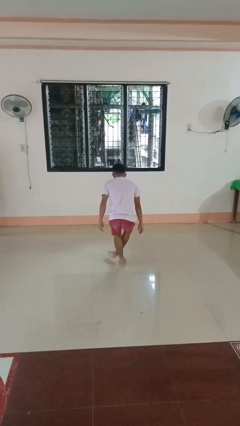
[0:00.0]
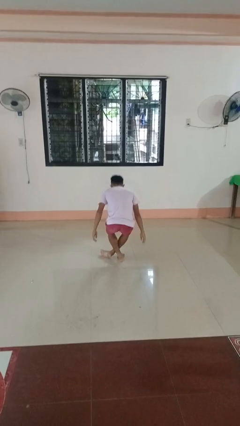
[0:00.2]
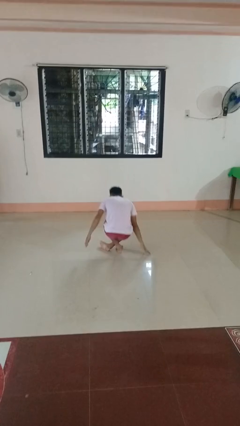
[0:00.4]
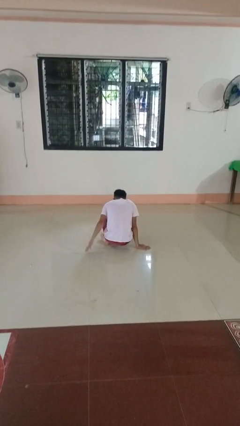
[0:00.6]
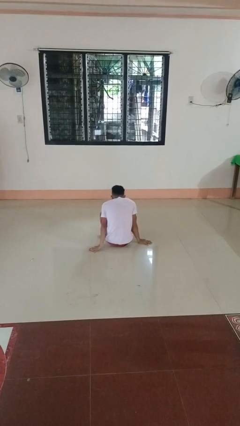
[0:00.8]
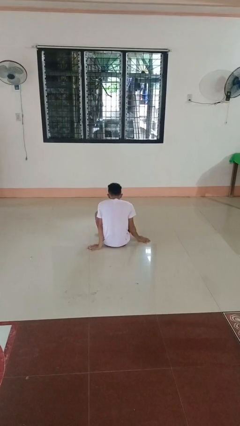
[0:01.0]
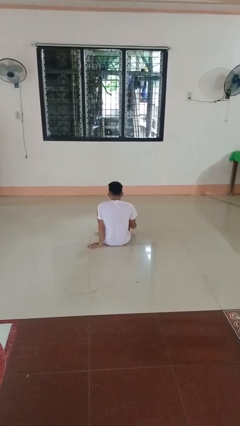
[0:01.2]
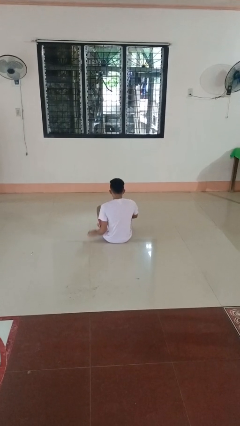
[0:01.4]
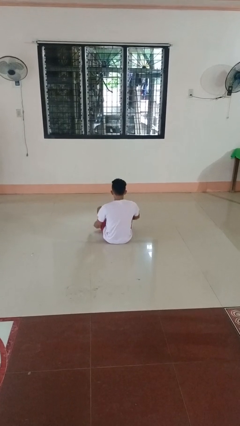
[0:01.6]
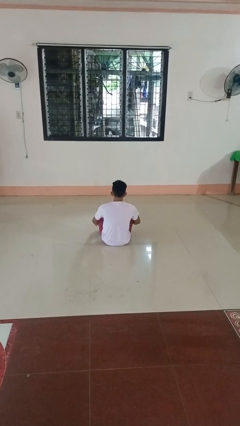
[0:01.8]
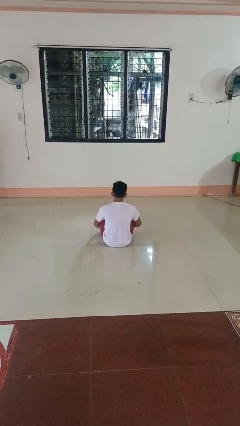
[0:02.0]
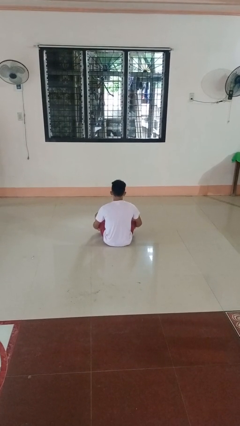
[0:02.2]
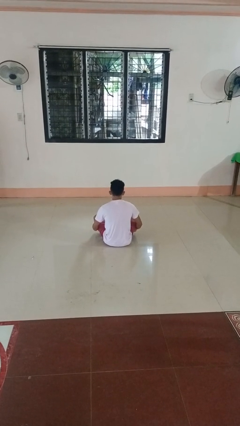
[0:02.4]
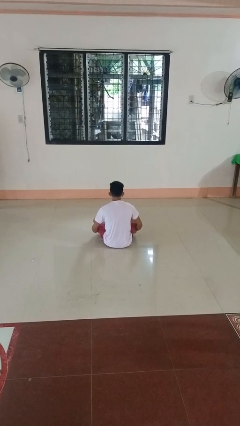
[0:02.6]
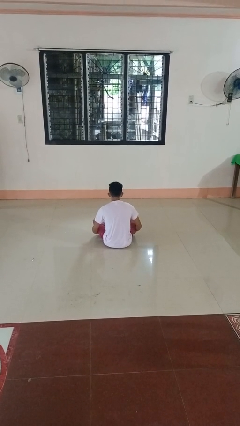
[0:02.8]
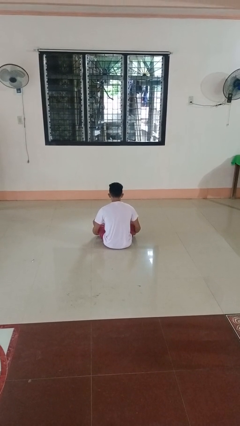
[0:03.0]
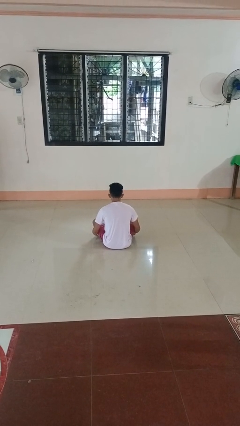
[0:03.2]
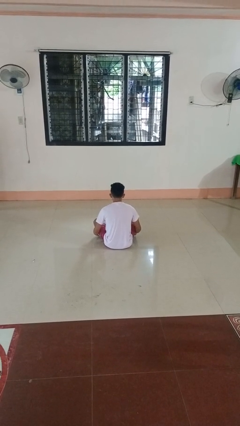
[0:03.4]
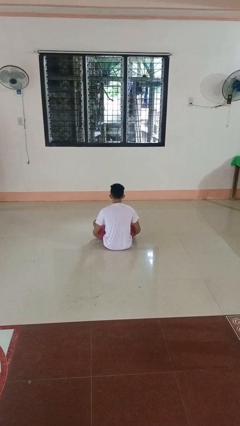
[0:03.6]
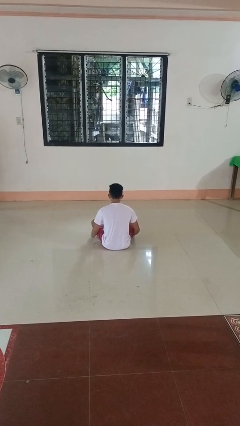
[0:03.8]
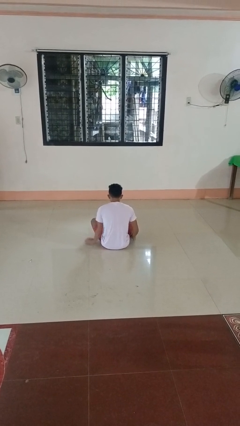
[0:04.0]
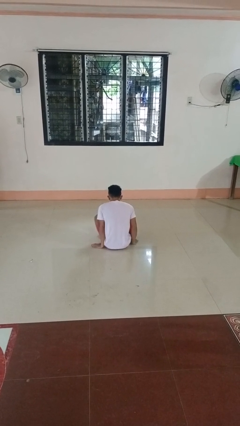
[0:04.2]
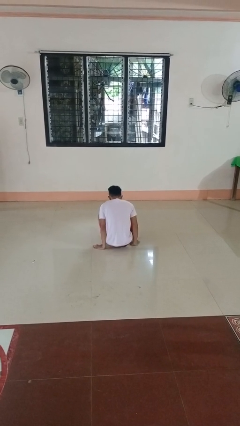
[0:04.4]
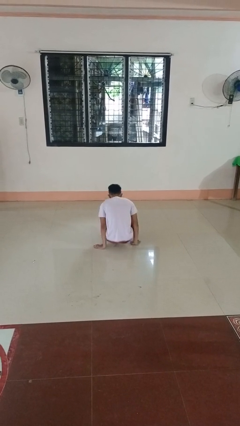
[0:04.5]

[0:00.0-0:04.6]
person sits crisscross

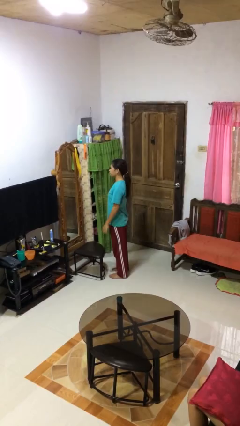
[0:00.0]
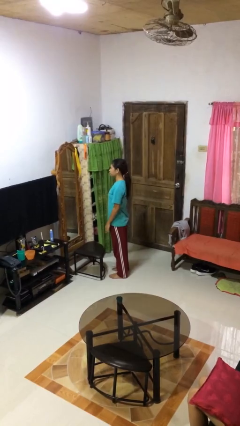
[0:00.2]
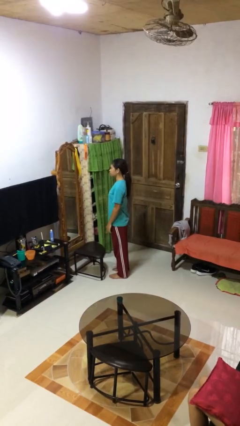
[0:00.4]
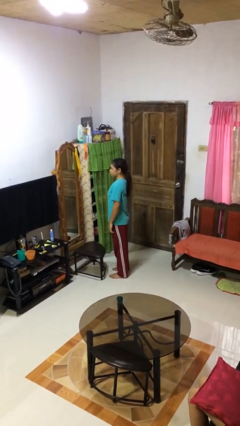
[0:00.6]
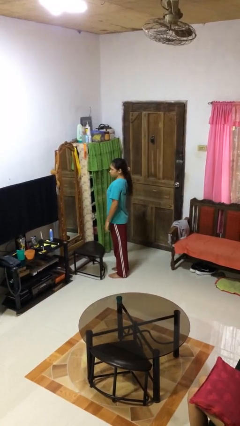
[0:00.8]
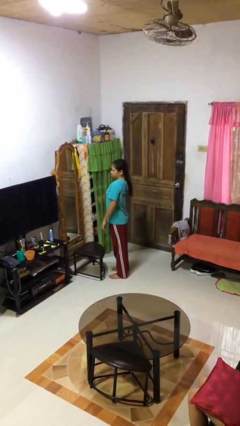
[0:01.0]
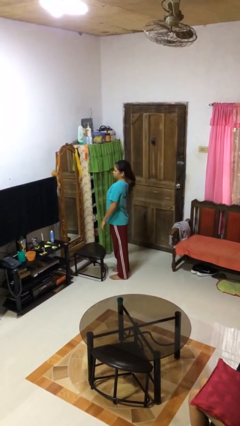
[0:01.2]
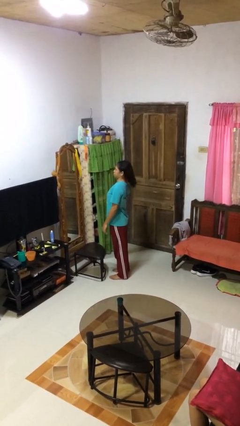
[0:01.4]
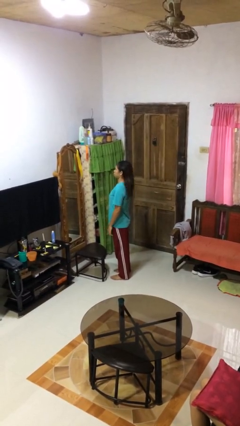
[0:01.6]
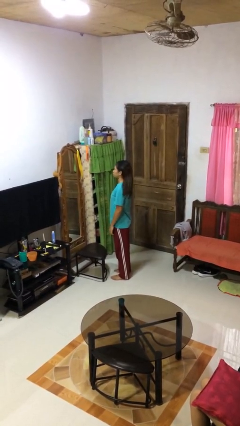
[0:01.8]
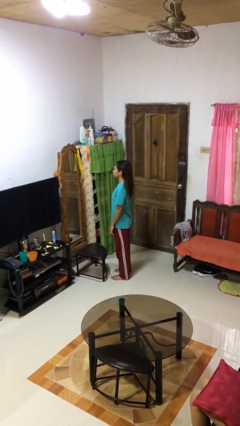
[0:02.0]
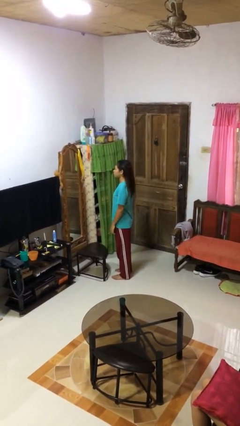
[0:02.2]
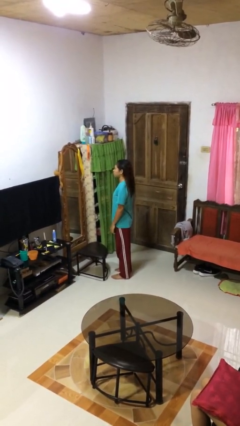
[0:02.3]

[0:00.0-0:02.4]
person takes off hairtie

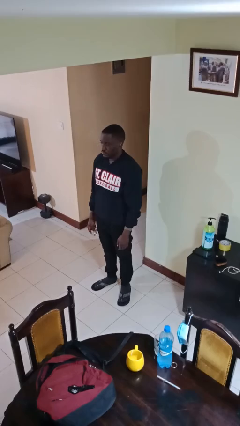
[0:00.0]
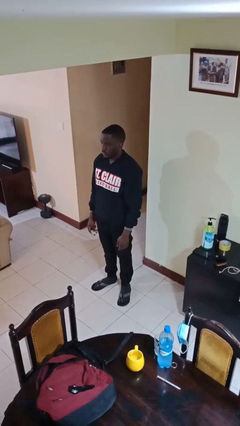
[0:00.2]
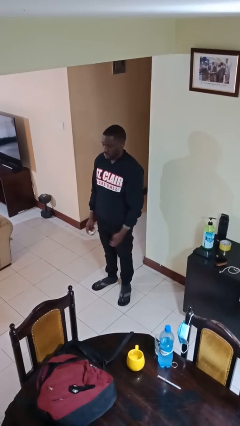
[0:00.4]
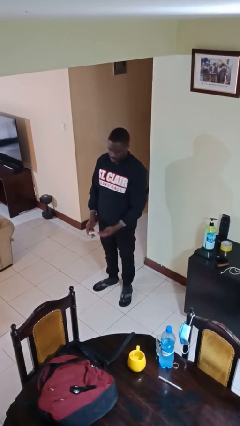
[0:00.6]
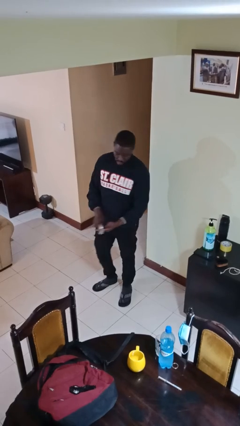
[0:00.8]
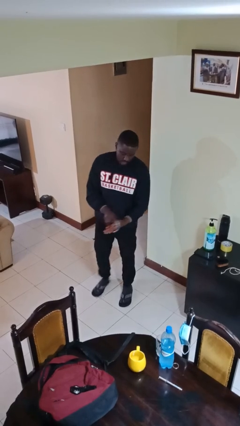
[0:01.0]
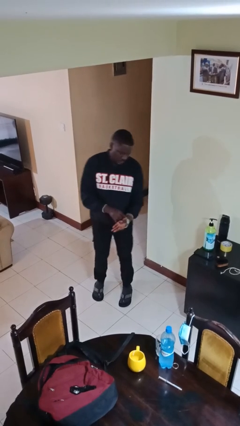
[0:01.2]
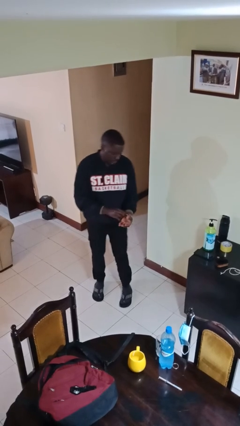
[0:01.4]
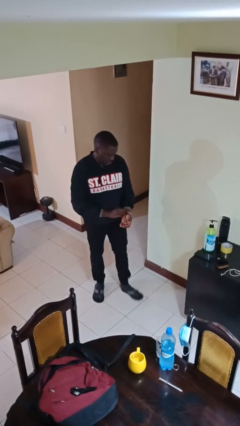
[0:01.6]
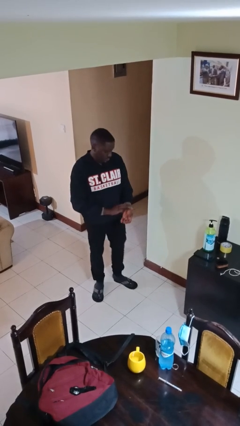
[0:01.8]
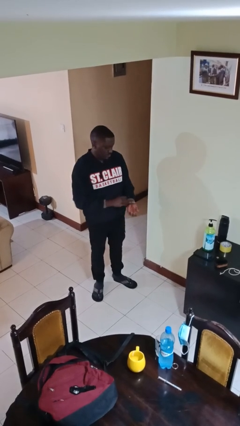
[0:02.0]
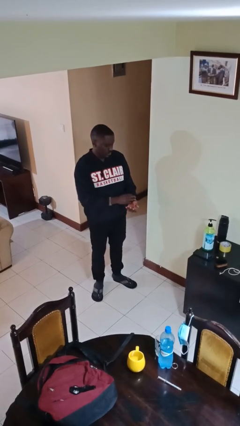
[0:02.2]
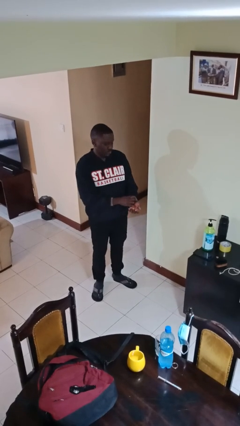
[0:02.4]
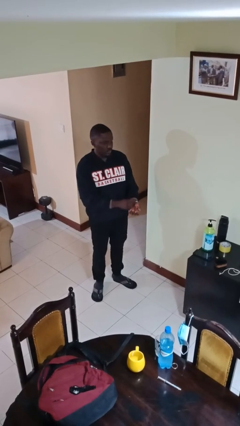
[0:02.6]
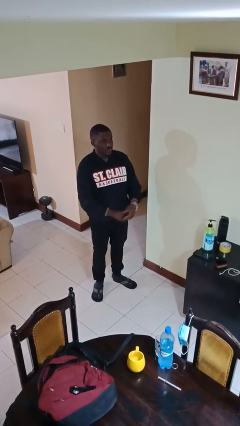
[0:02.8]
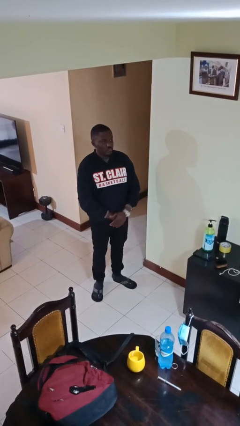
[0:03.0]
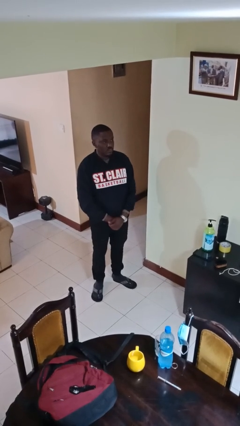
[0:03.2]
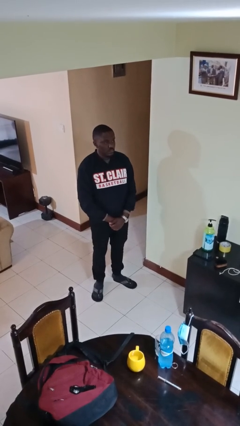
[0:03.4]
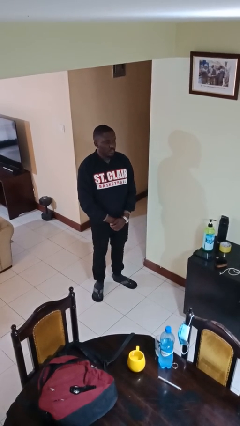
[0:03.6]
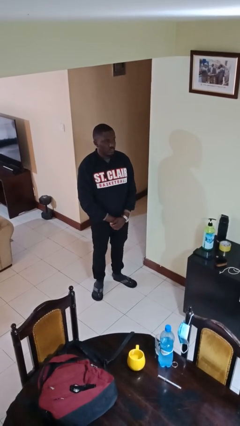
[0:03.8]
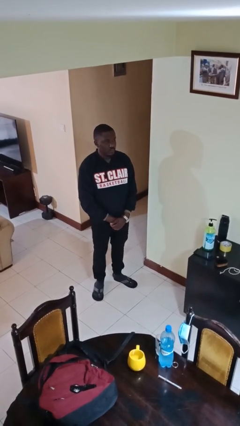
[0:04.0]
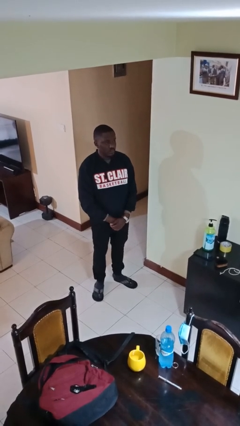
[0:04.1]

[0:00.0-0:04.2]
person puts on wristwatch

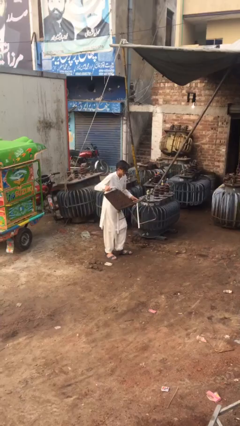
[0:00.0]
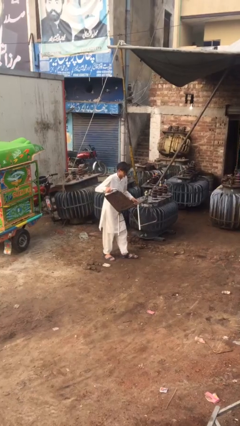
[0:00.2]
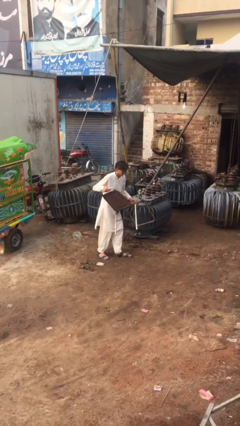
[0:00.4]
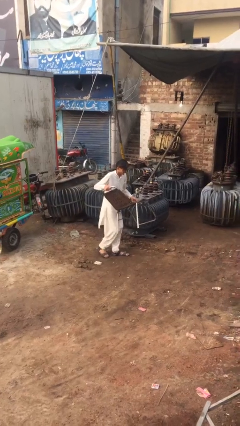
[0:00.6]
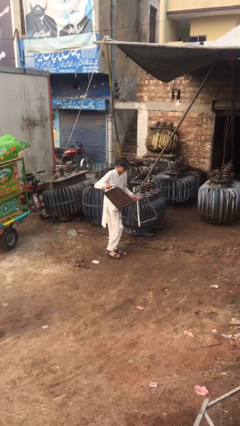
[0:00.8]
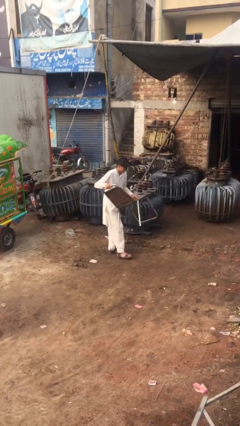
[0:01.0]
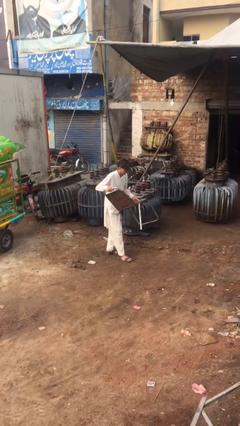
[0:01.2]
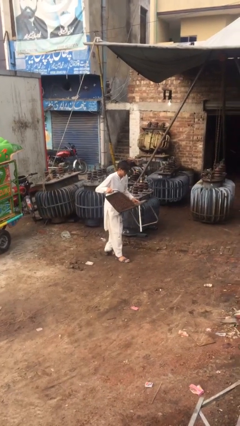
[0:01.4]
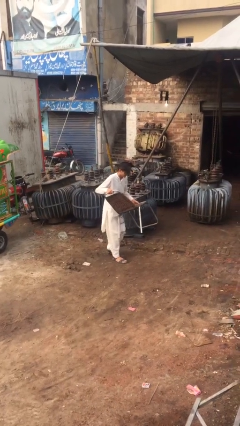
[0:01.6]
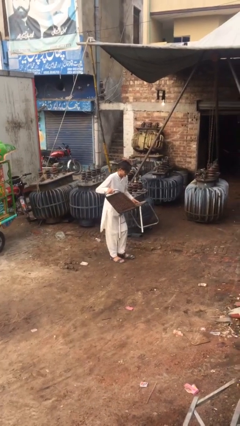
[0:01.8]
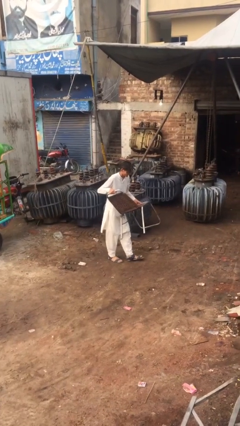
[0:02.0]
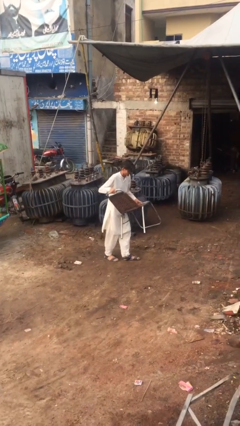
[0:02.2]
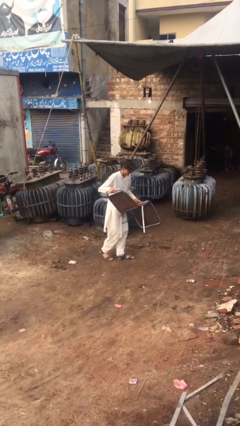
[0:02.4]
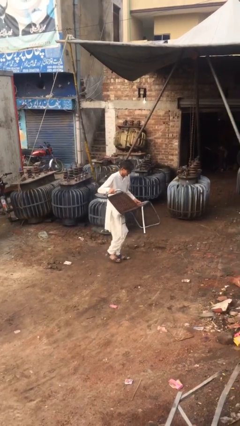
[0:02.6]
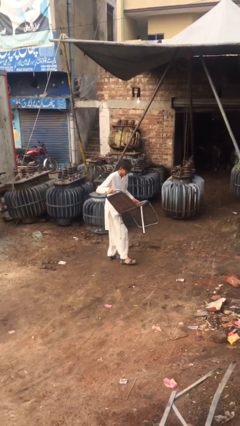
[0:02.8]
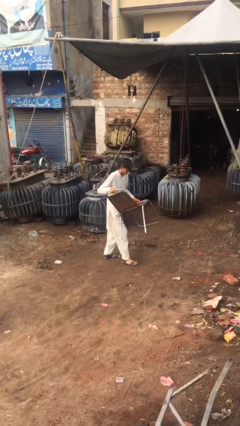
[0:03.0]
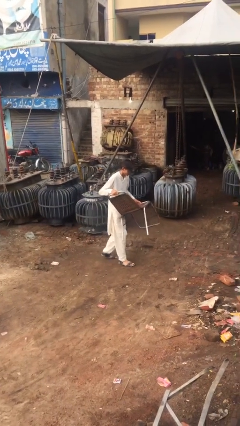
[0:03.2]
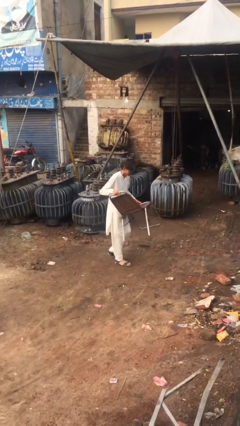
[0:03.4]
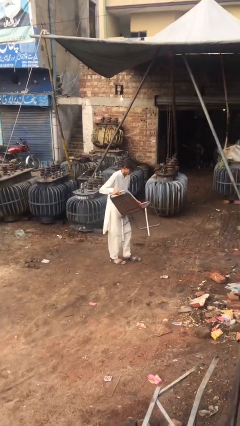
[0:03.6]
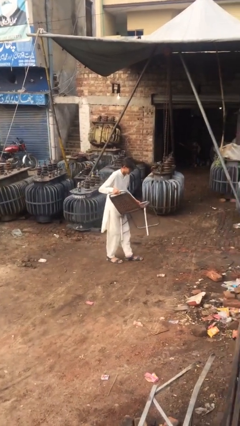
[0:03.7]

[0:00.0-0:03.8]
person carries heavy object

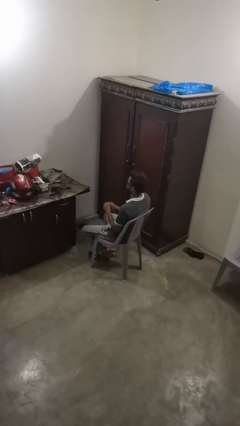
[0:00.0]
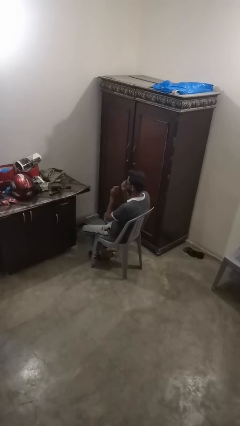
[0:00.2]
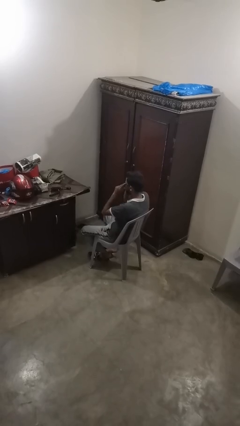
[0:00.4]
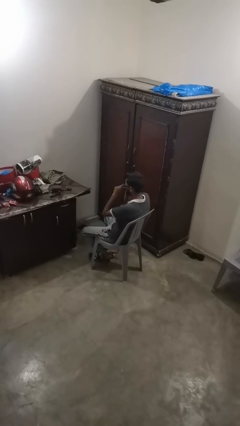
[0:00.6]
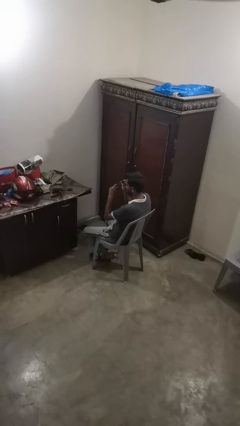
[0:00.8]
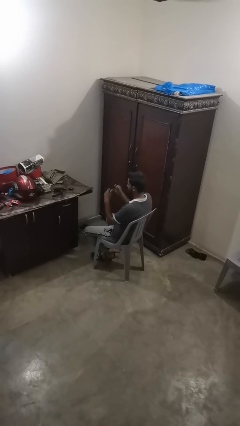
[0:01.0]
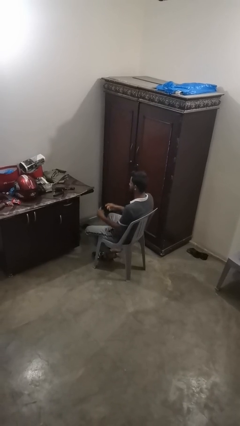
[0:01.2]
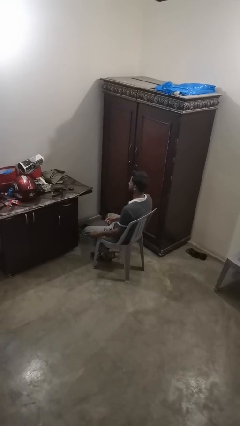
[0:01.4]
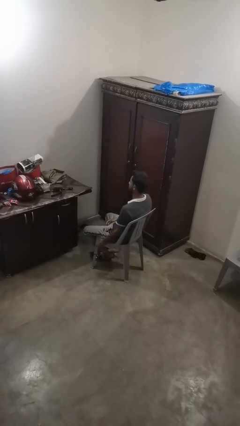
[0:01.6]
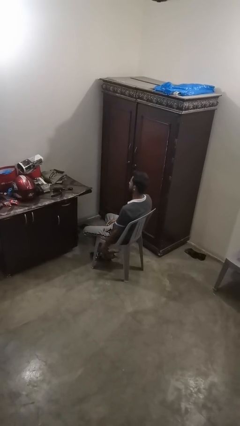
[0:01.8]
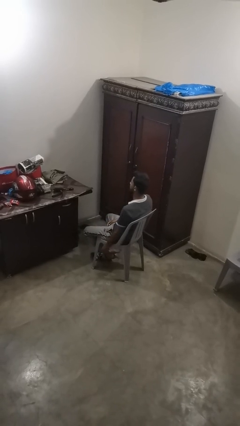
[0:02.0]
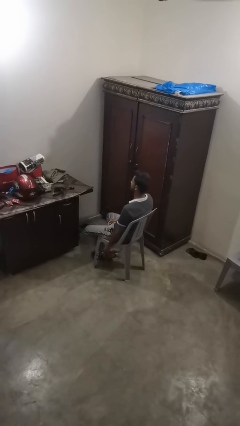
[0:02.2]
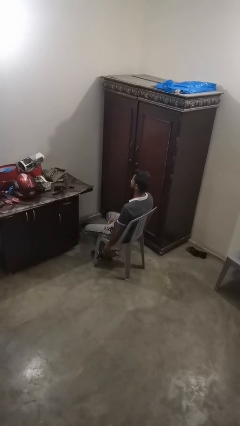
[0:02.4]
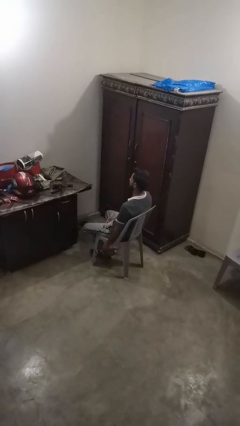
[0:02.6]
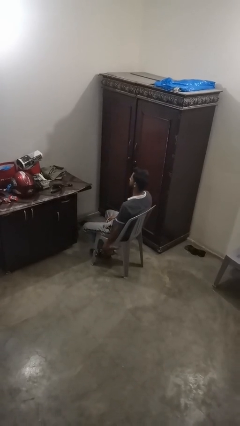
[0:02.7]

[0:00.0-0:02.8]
person takes off sunglasses
